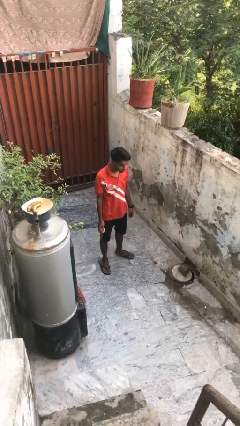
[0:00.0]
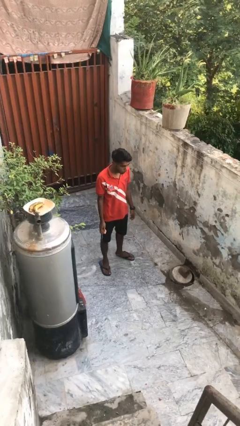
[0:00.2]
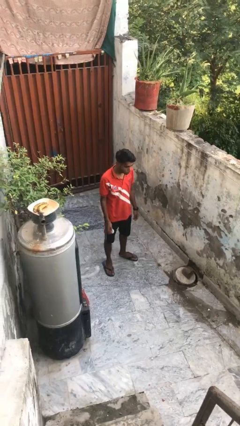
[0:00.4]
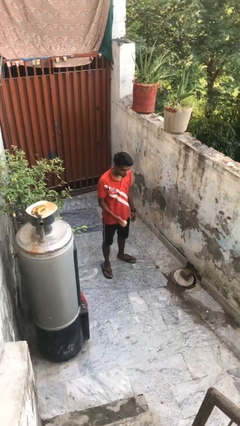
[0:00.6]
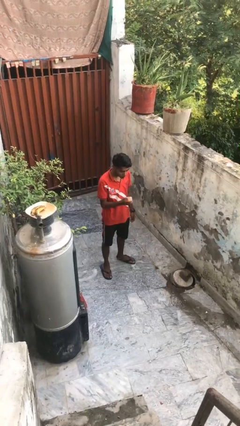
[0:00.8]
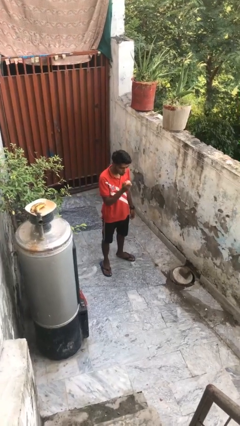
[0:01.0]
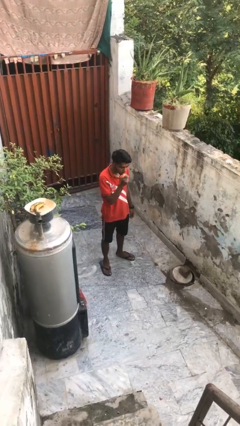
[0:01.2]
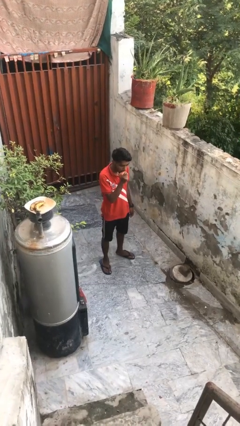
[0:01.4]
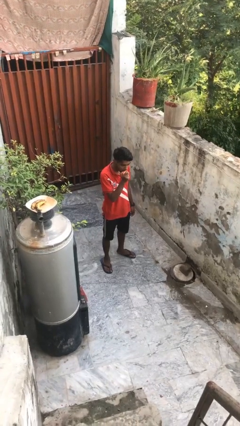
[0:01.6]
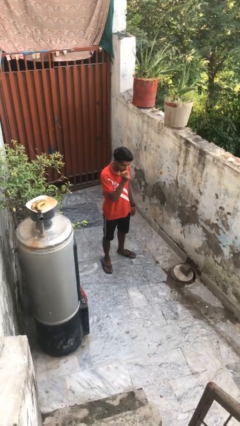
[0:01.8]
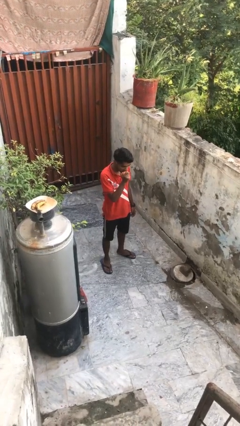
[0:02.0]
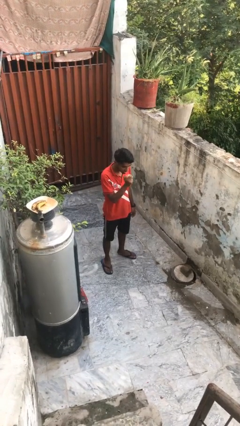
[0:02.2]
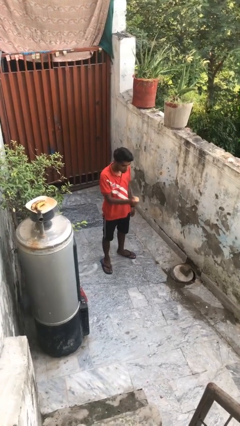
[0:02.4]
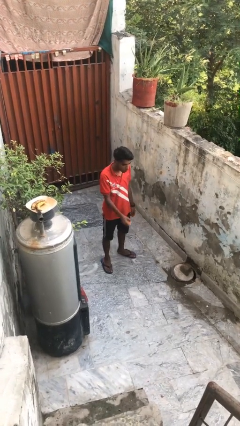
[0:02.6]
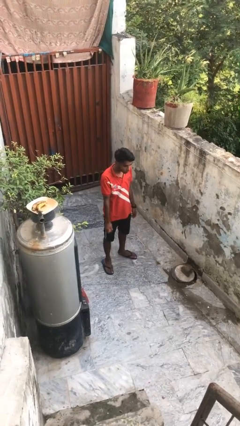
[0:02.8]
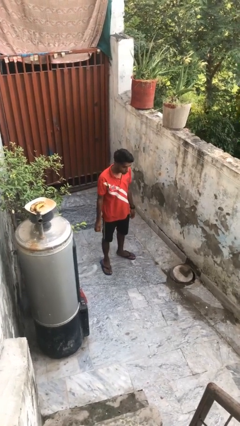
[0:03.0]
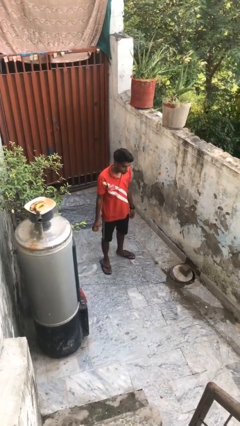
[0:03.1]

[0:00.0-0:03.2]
person eats apple

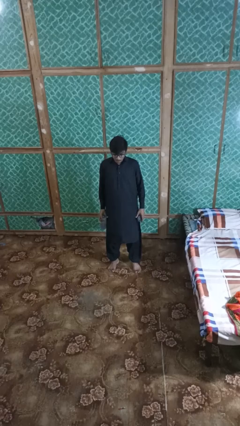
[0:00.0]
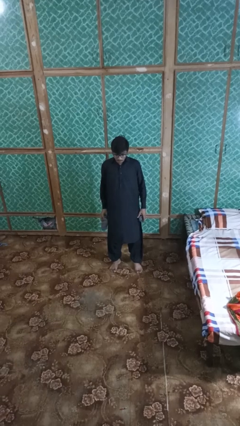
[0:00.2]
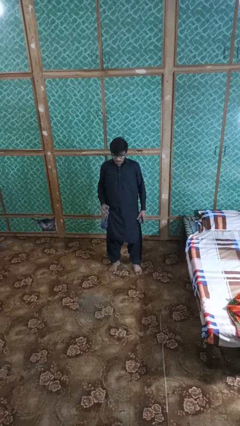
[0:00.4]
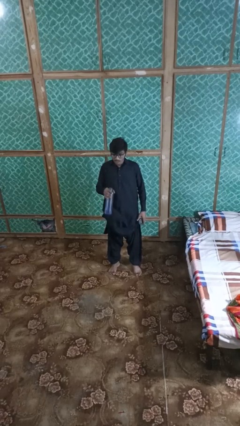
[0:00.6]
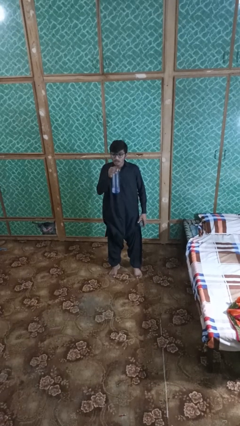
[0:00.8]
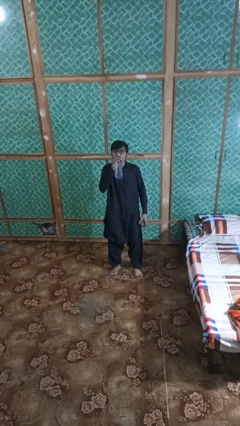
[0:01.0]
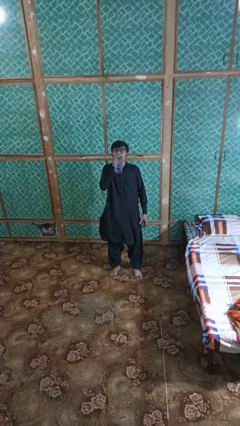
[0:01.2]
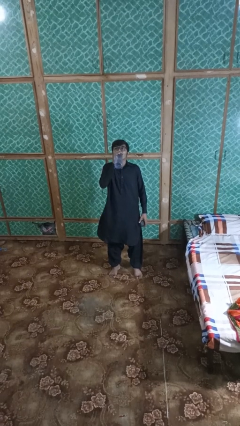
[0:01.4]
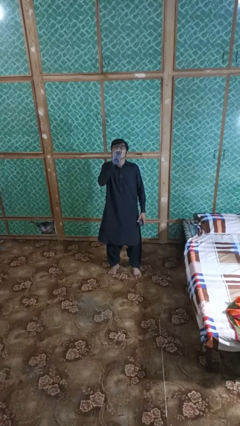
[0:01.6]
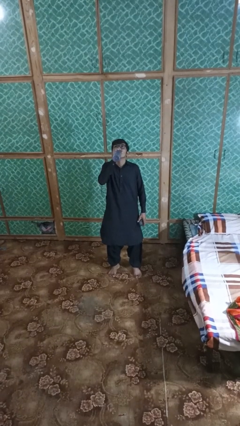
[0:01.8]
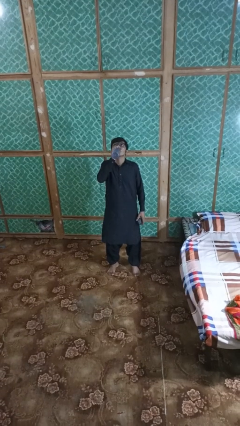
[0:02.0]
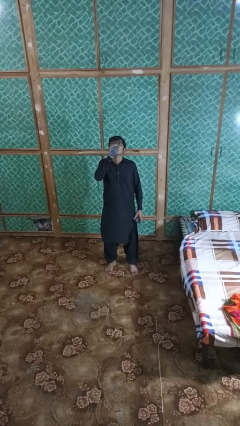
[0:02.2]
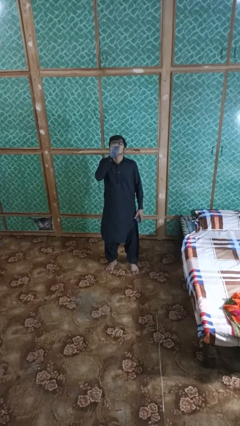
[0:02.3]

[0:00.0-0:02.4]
person drinks from bottle

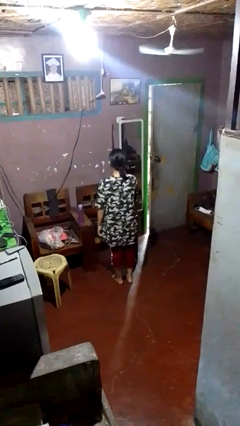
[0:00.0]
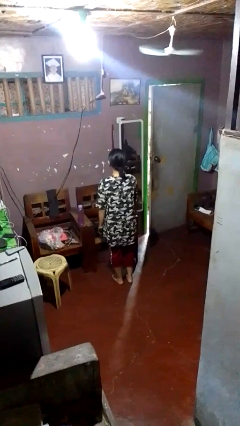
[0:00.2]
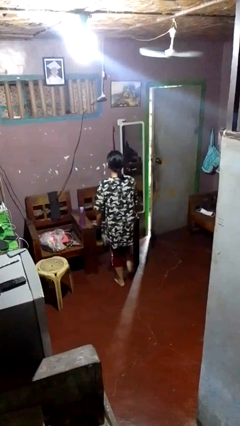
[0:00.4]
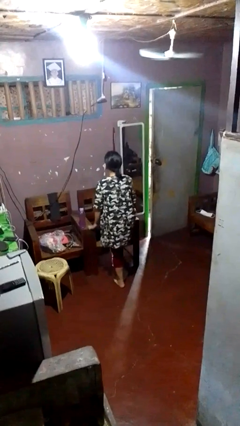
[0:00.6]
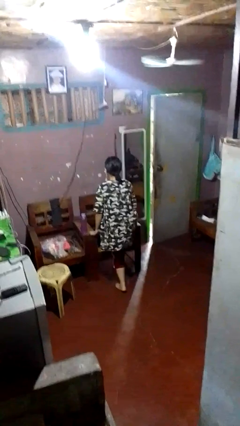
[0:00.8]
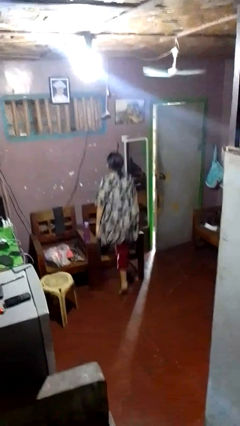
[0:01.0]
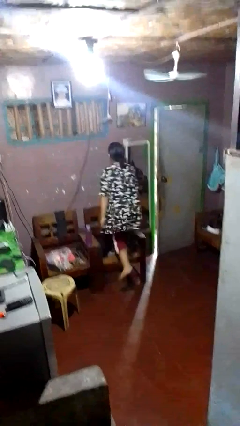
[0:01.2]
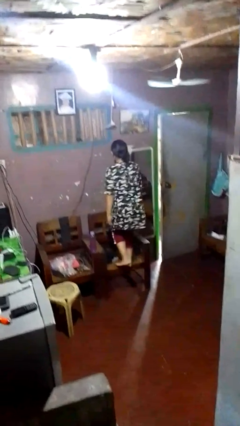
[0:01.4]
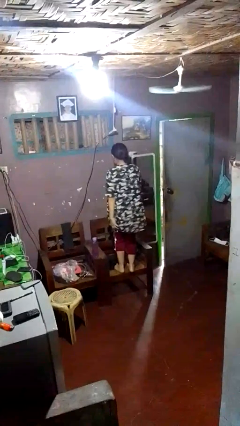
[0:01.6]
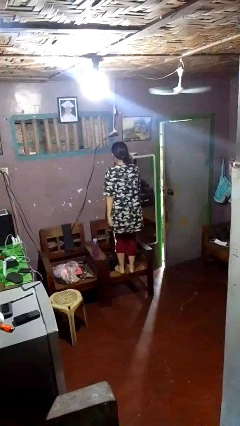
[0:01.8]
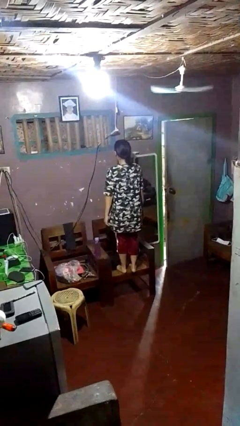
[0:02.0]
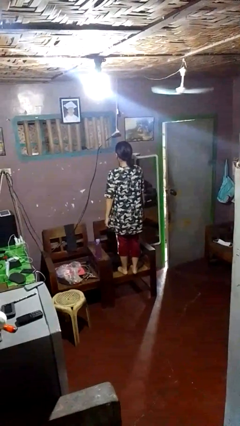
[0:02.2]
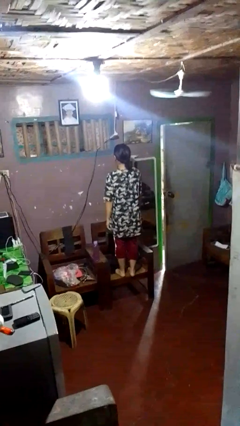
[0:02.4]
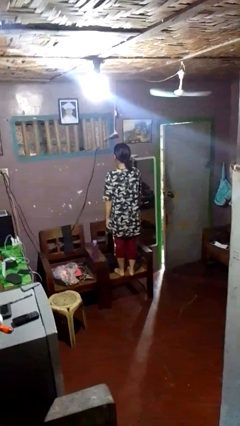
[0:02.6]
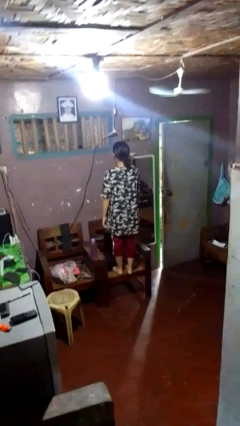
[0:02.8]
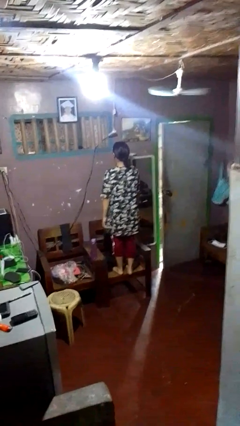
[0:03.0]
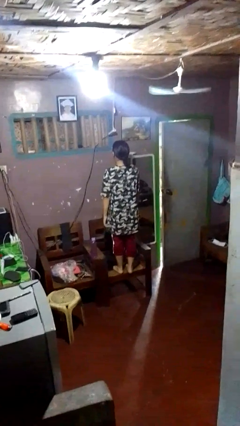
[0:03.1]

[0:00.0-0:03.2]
person climbs on chair

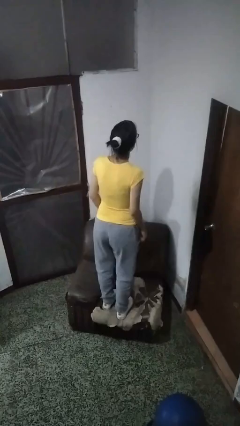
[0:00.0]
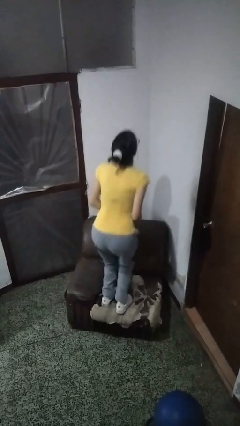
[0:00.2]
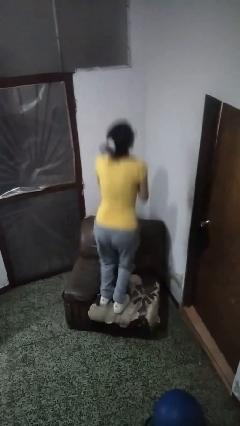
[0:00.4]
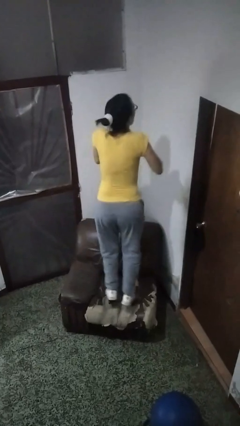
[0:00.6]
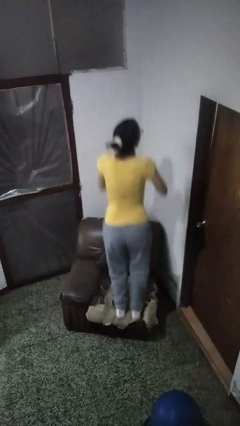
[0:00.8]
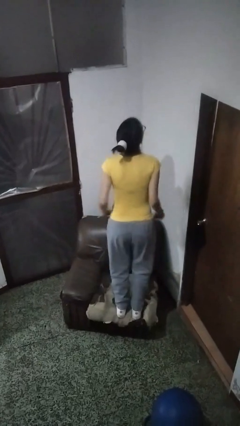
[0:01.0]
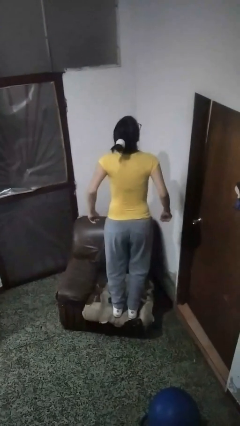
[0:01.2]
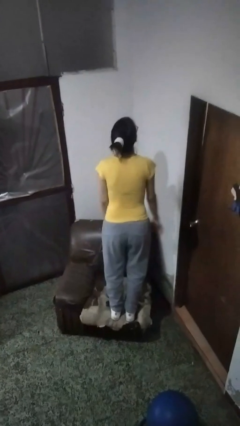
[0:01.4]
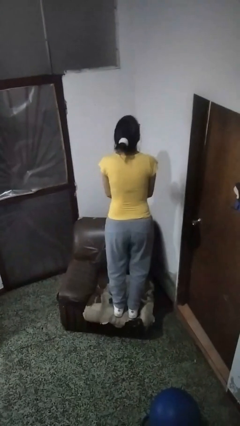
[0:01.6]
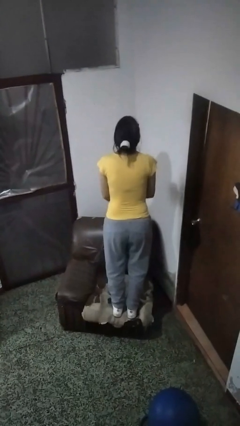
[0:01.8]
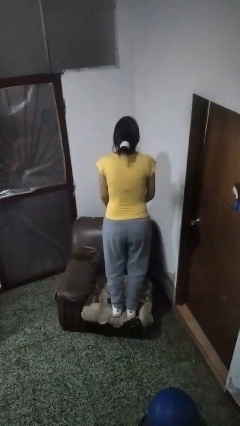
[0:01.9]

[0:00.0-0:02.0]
person jumps on couch

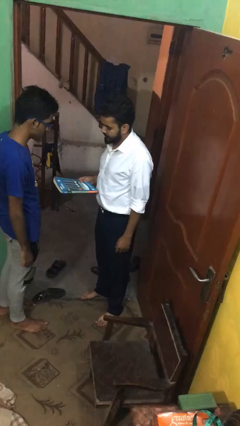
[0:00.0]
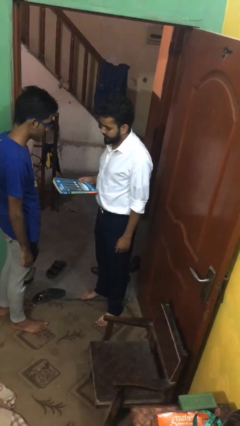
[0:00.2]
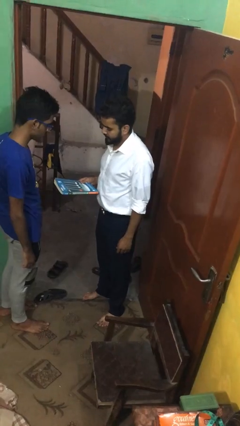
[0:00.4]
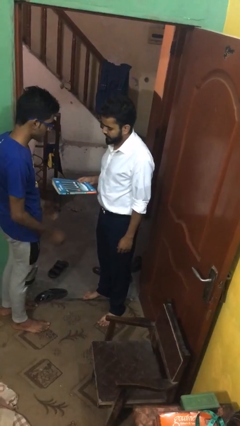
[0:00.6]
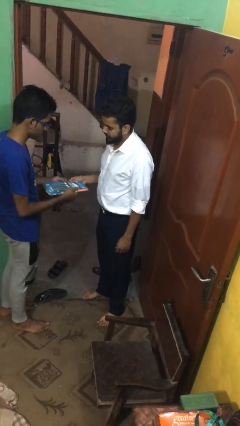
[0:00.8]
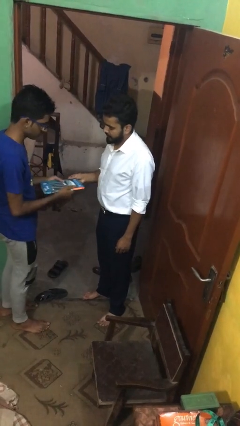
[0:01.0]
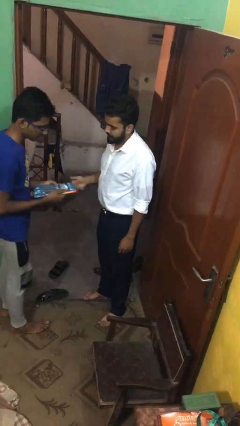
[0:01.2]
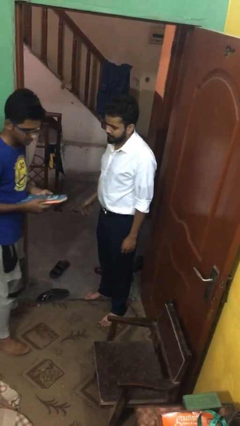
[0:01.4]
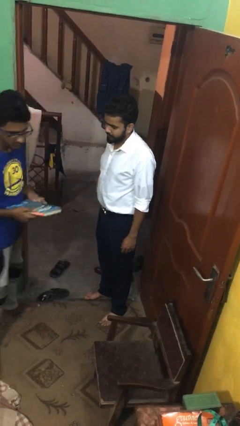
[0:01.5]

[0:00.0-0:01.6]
person transfers object to person

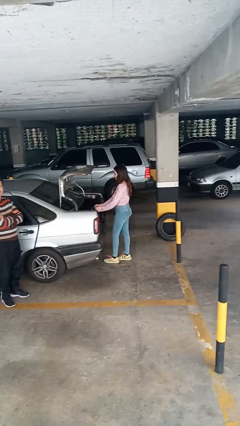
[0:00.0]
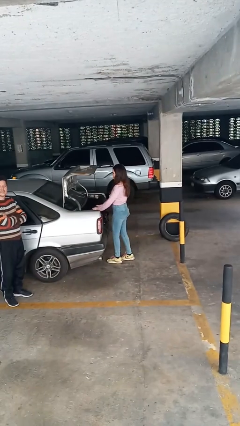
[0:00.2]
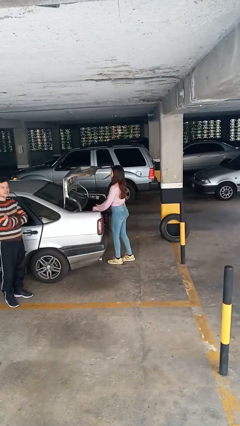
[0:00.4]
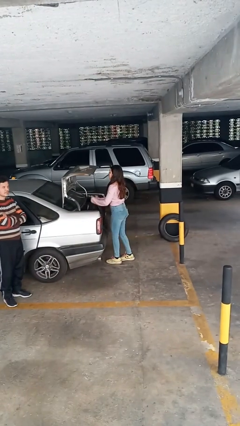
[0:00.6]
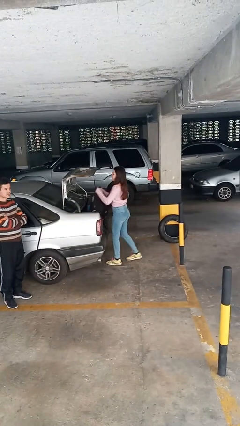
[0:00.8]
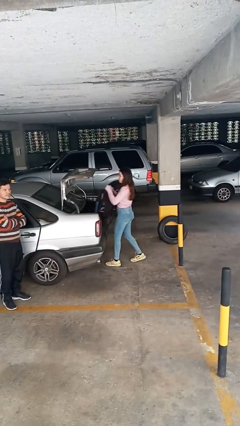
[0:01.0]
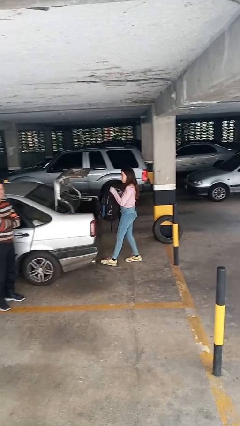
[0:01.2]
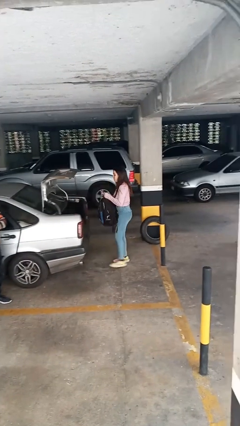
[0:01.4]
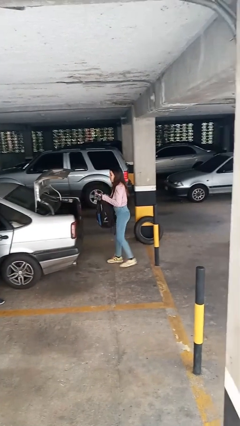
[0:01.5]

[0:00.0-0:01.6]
person unloads car

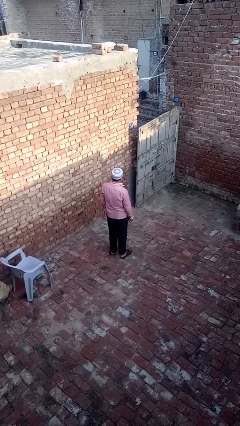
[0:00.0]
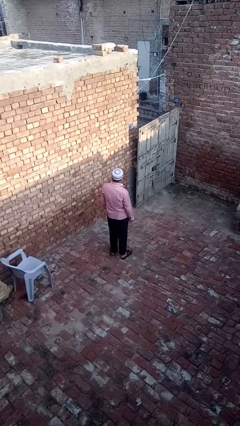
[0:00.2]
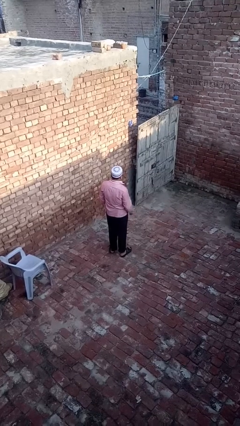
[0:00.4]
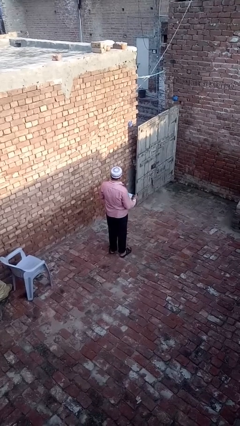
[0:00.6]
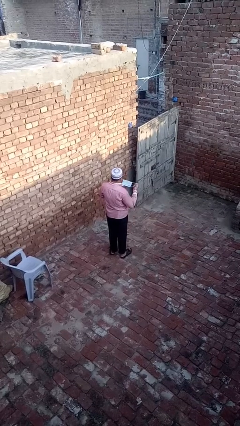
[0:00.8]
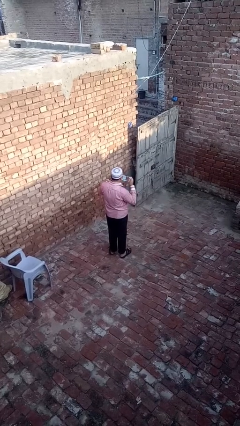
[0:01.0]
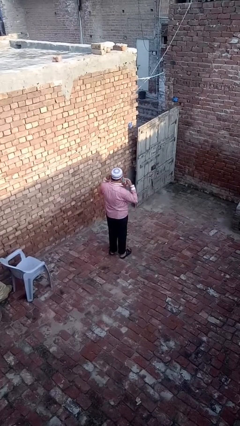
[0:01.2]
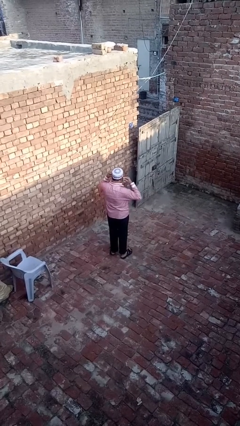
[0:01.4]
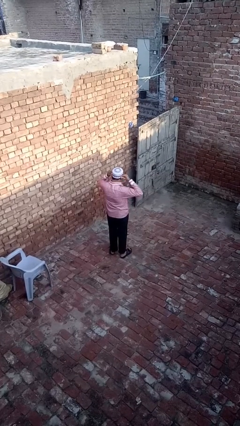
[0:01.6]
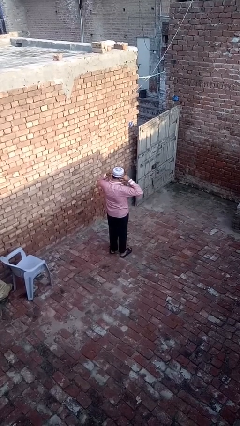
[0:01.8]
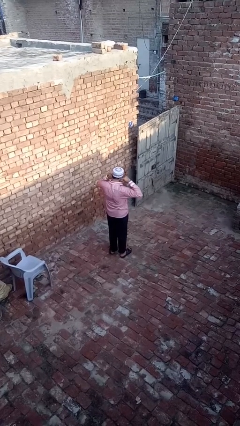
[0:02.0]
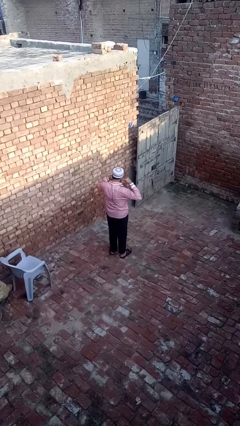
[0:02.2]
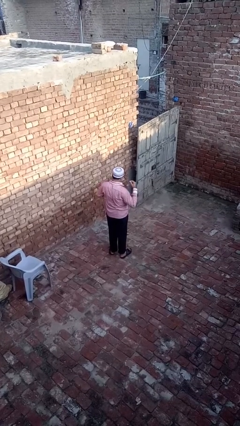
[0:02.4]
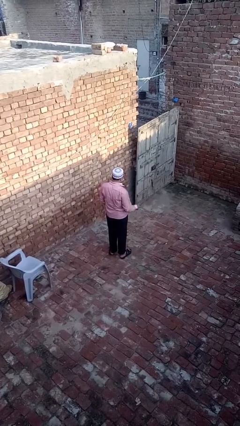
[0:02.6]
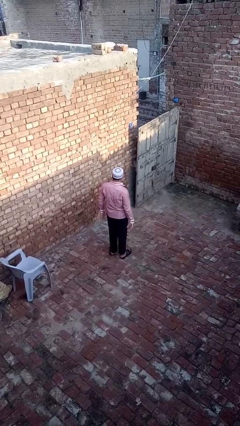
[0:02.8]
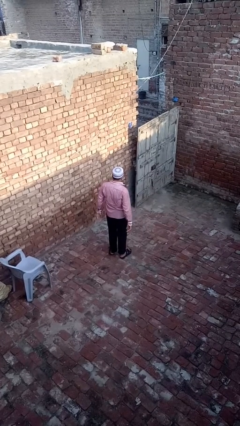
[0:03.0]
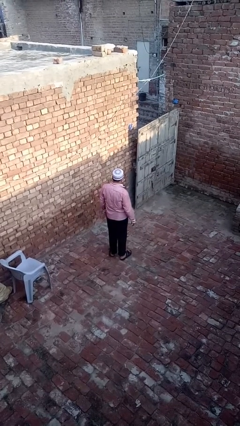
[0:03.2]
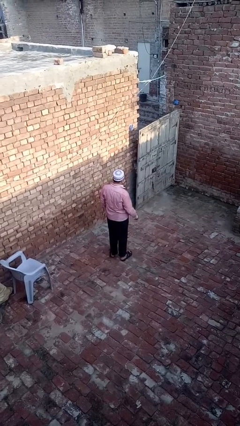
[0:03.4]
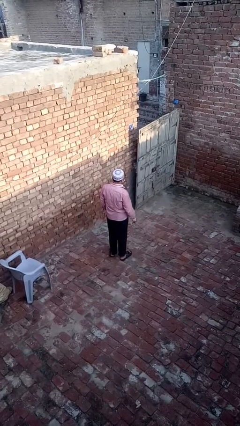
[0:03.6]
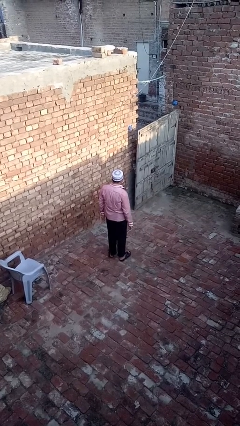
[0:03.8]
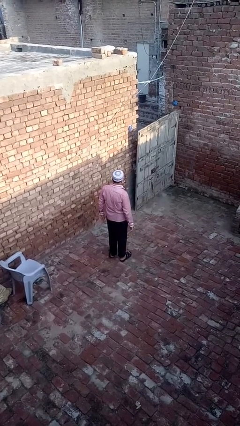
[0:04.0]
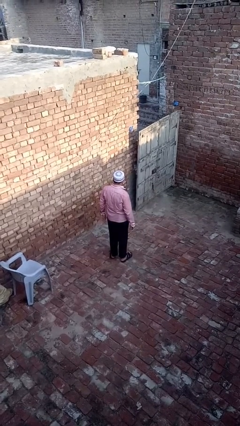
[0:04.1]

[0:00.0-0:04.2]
person puts on facemask
